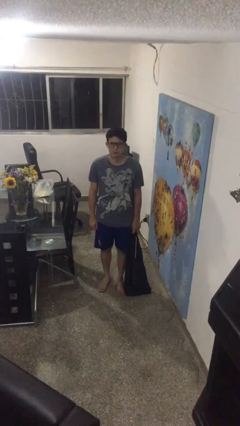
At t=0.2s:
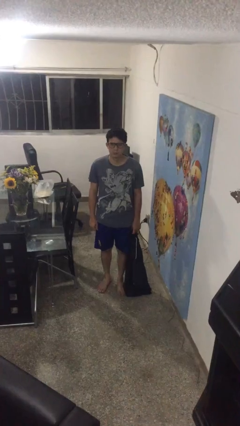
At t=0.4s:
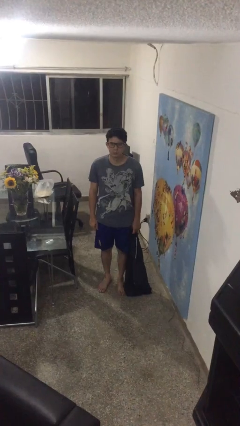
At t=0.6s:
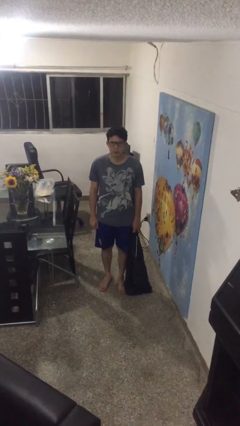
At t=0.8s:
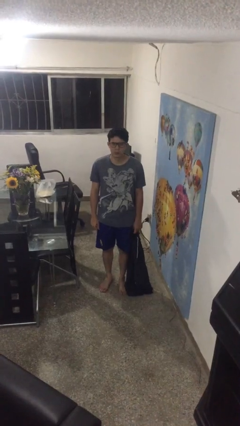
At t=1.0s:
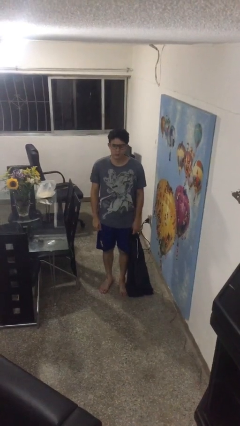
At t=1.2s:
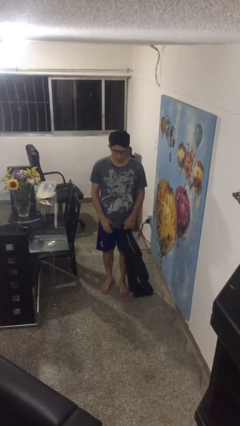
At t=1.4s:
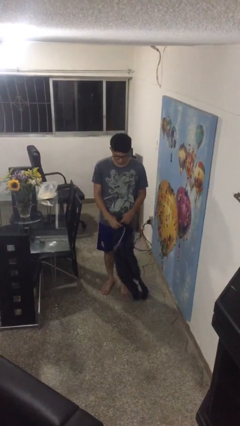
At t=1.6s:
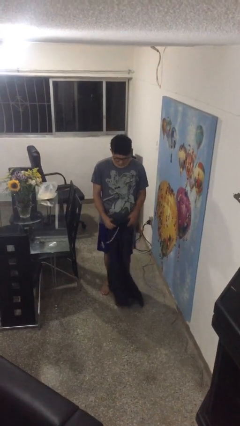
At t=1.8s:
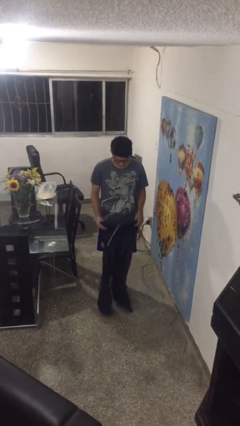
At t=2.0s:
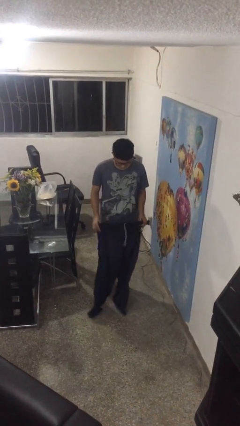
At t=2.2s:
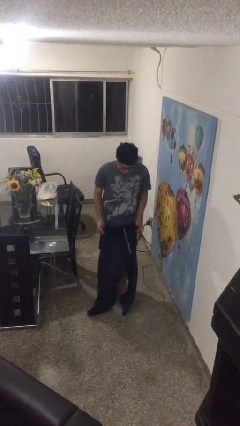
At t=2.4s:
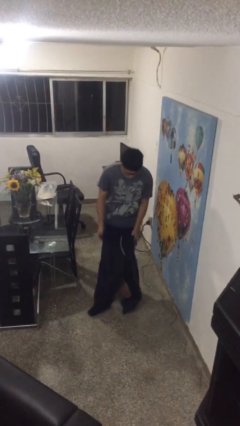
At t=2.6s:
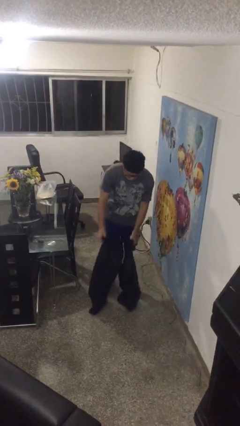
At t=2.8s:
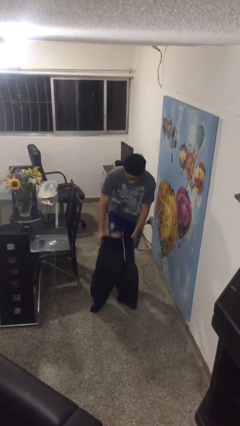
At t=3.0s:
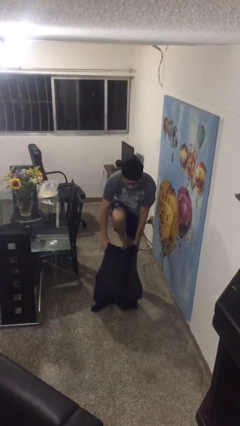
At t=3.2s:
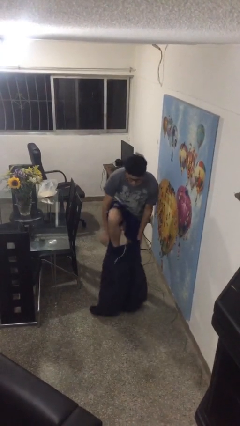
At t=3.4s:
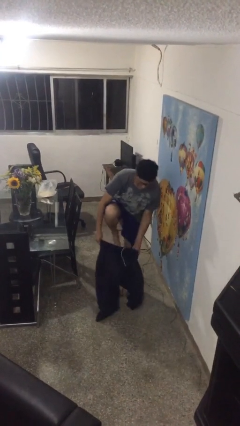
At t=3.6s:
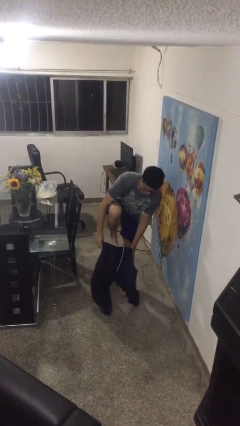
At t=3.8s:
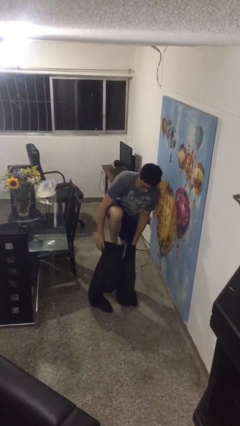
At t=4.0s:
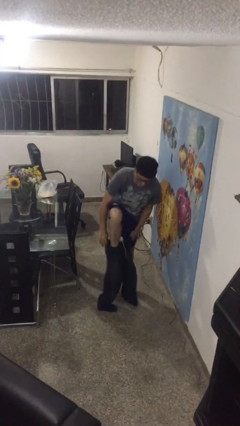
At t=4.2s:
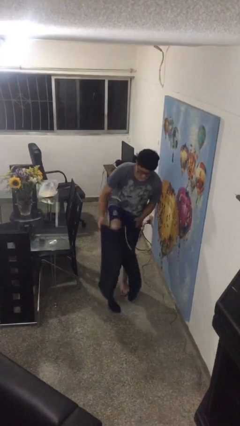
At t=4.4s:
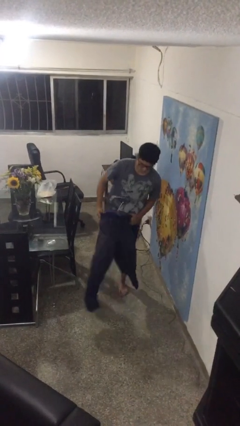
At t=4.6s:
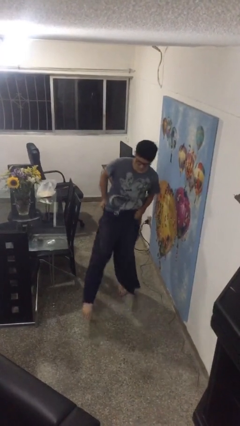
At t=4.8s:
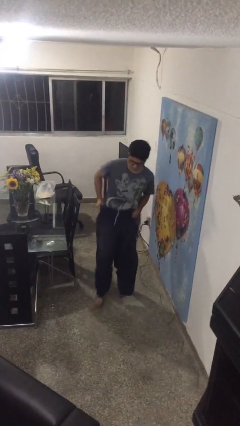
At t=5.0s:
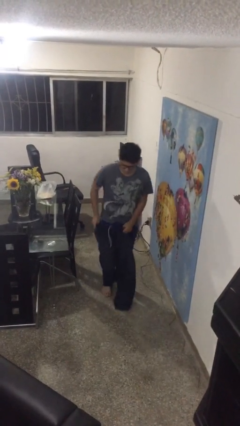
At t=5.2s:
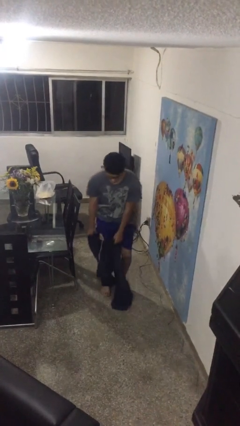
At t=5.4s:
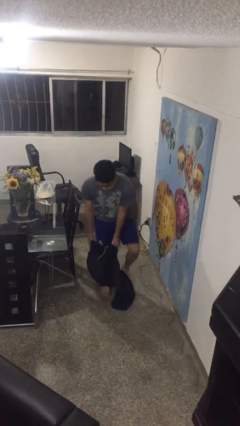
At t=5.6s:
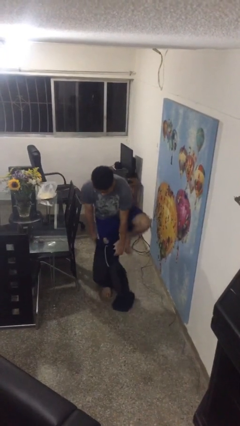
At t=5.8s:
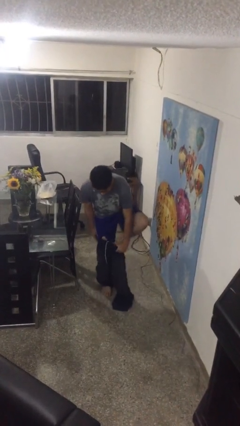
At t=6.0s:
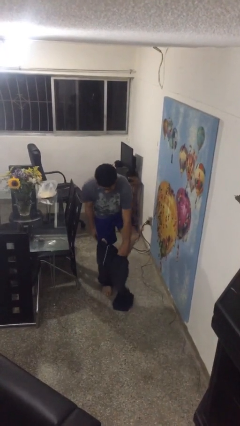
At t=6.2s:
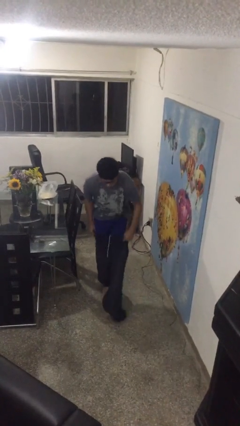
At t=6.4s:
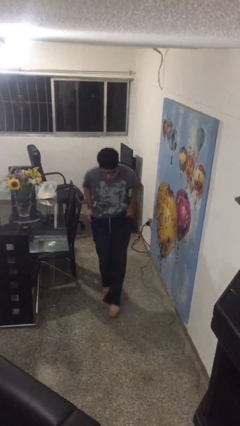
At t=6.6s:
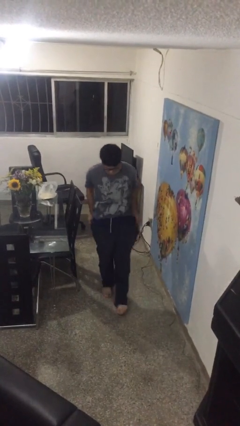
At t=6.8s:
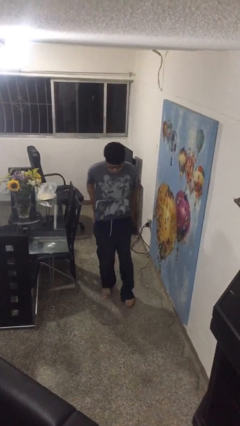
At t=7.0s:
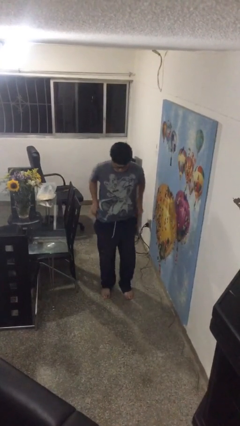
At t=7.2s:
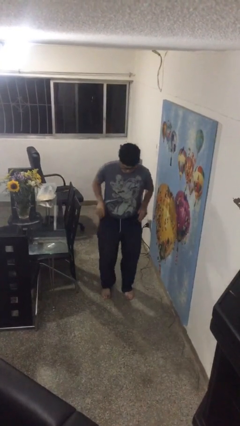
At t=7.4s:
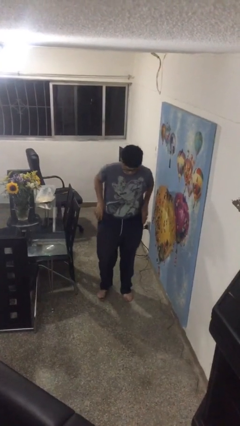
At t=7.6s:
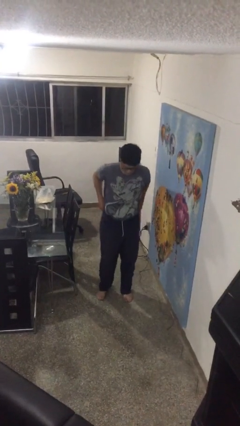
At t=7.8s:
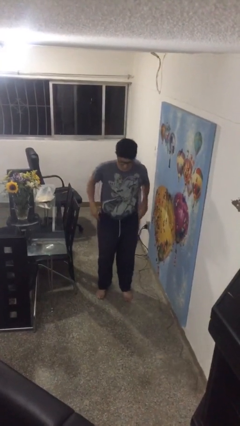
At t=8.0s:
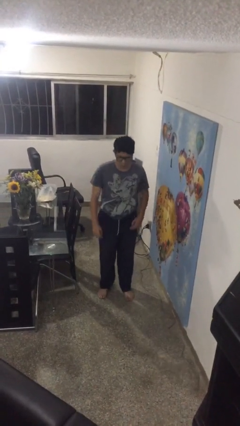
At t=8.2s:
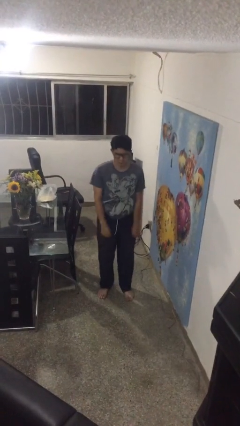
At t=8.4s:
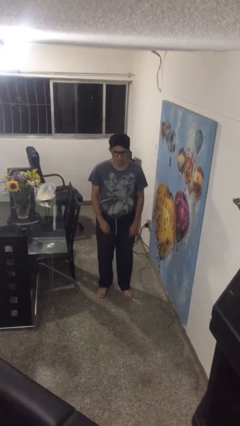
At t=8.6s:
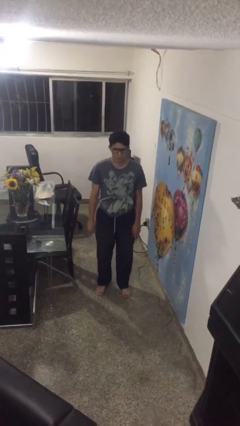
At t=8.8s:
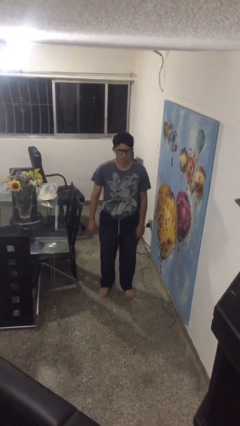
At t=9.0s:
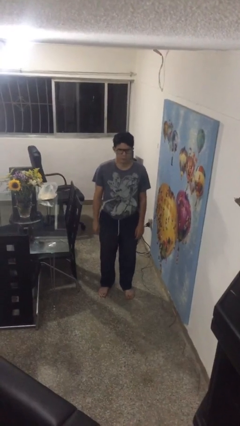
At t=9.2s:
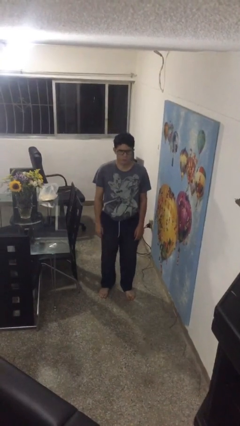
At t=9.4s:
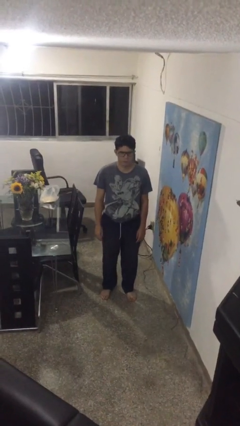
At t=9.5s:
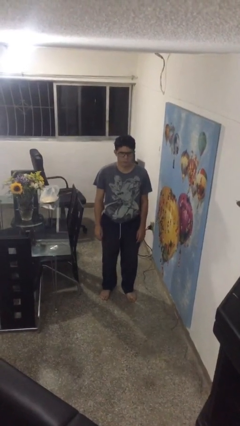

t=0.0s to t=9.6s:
person puts on pants

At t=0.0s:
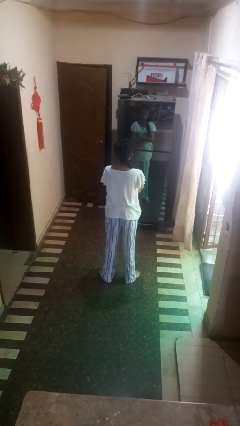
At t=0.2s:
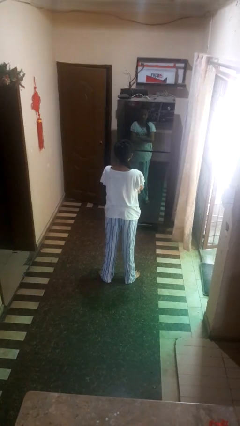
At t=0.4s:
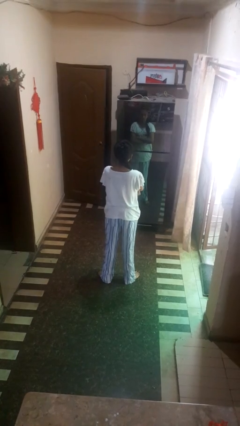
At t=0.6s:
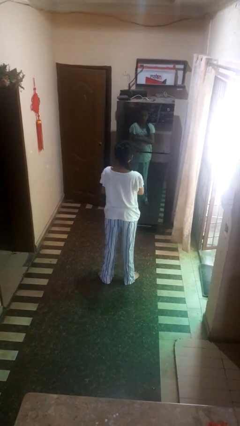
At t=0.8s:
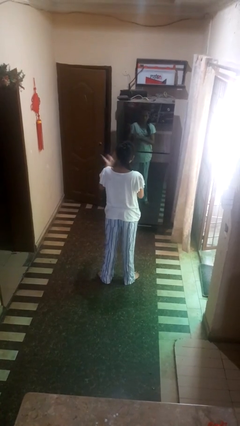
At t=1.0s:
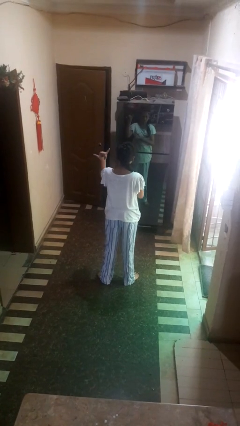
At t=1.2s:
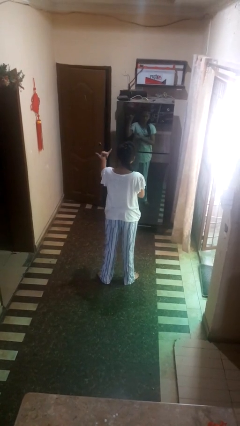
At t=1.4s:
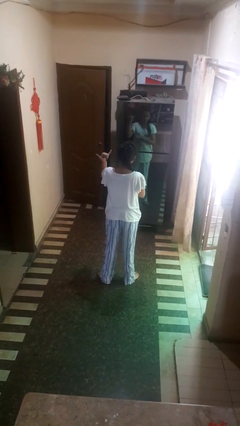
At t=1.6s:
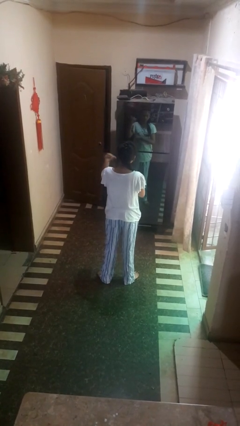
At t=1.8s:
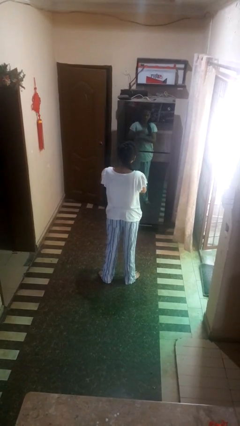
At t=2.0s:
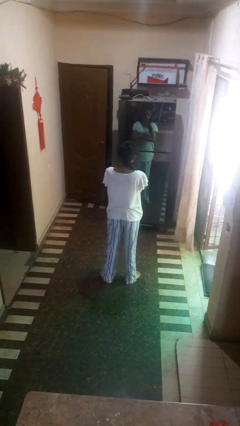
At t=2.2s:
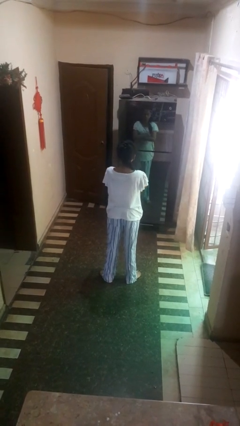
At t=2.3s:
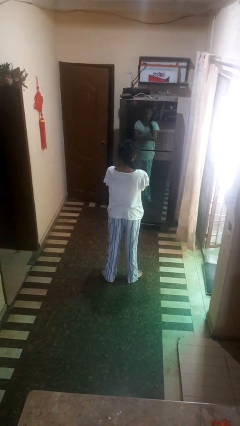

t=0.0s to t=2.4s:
person gestures hang loose

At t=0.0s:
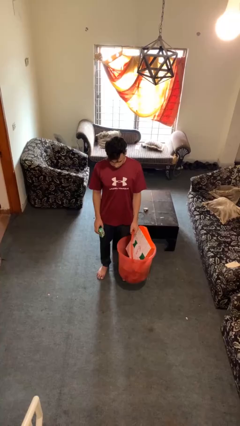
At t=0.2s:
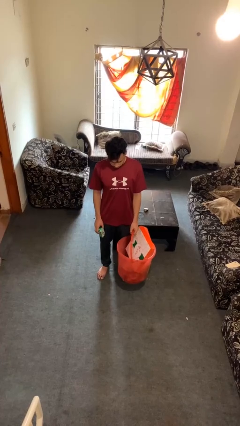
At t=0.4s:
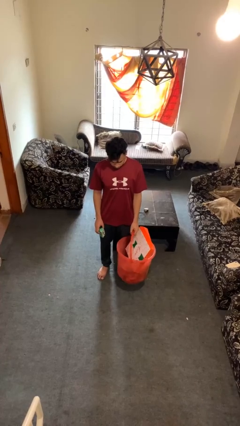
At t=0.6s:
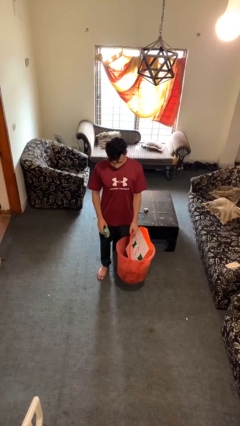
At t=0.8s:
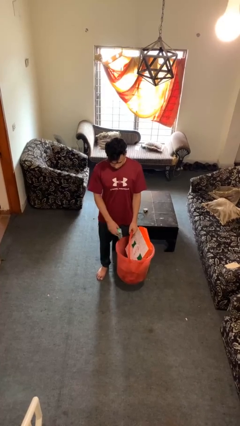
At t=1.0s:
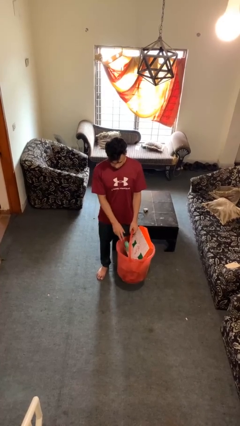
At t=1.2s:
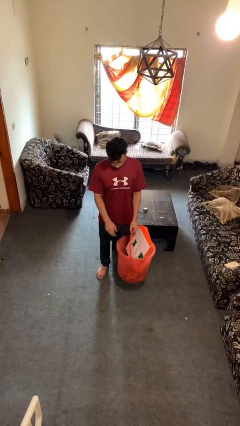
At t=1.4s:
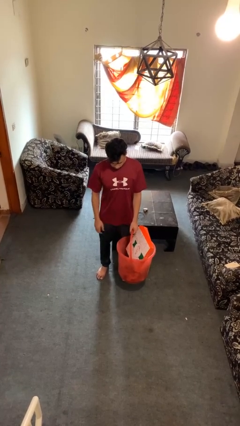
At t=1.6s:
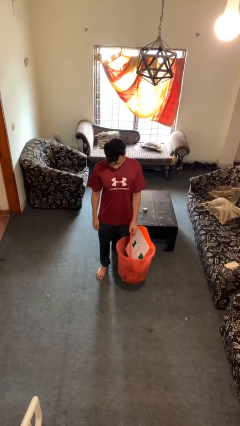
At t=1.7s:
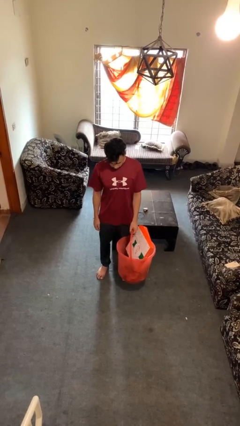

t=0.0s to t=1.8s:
person puts object into basket

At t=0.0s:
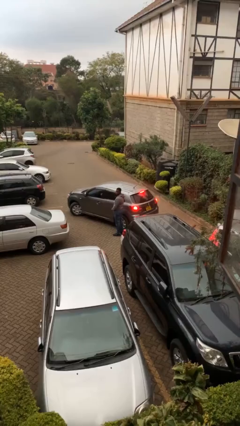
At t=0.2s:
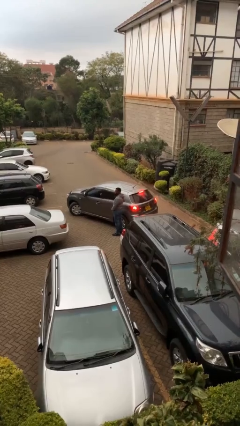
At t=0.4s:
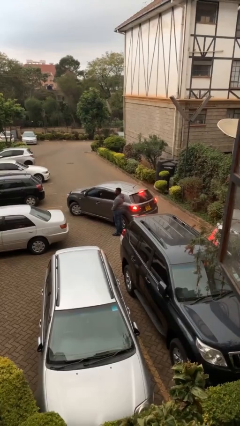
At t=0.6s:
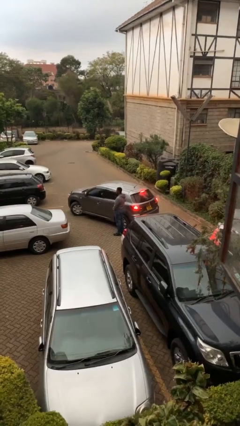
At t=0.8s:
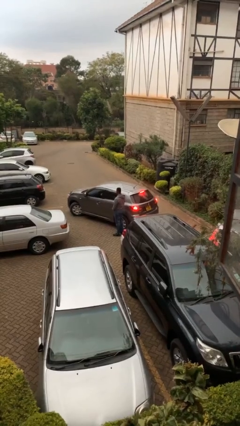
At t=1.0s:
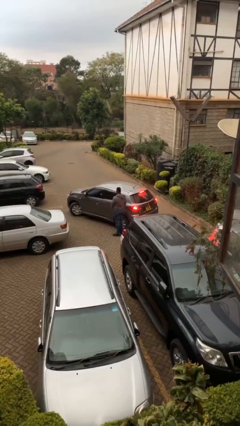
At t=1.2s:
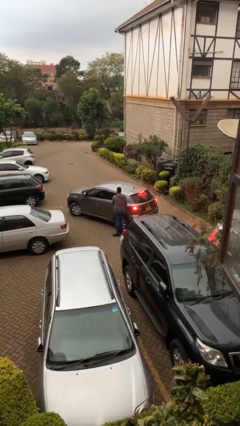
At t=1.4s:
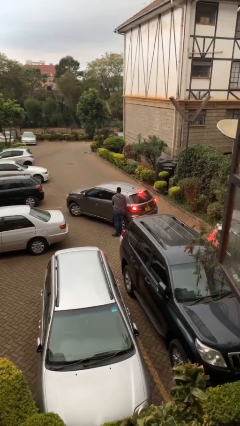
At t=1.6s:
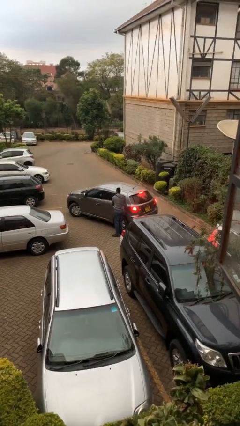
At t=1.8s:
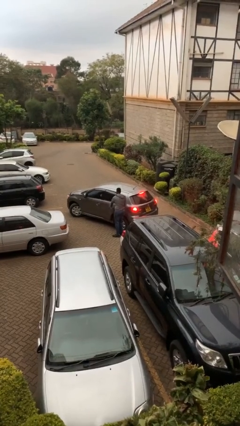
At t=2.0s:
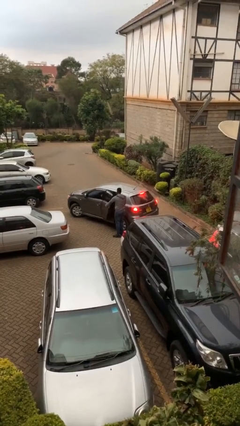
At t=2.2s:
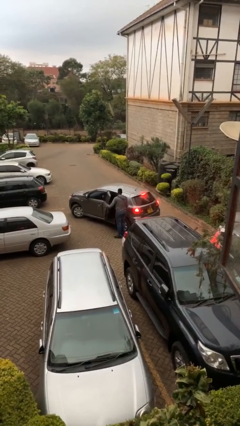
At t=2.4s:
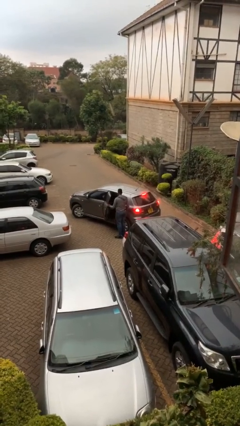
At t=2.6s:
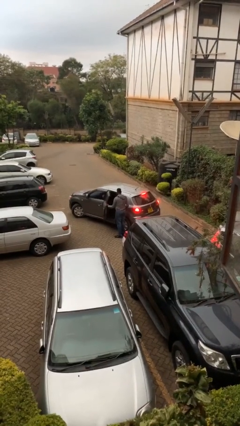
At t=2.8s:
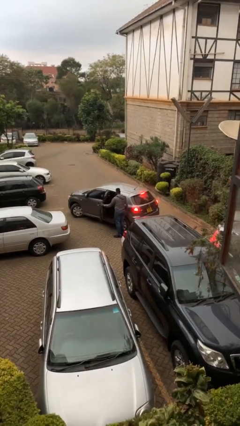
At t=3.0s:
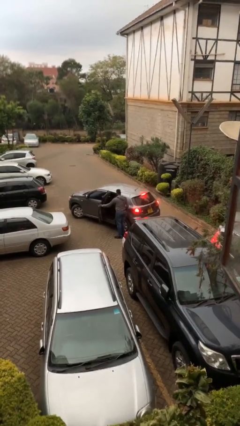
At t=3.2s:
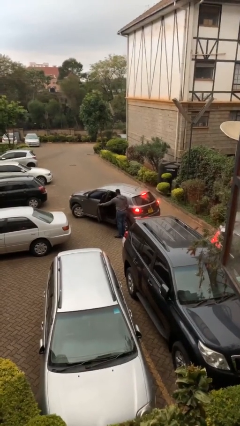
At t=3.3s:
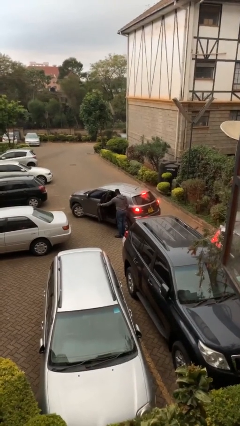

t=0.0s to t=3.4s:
person opens car door

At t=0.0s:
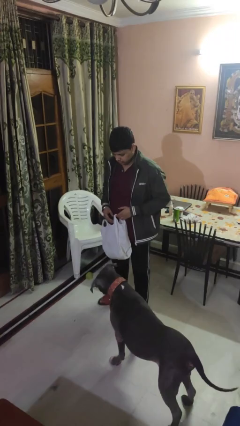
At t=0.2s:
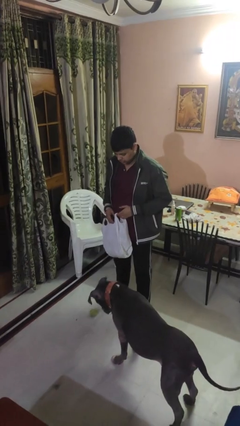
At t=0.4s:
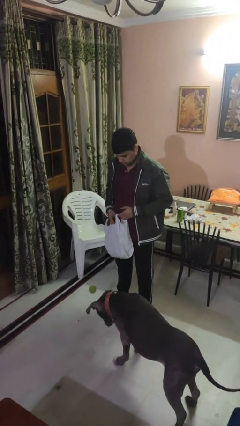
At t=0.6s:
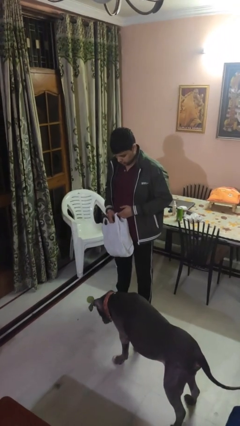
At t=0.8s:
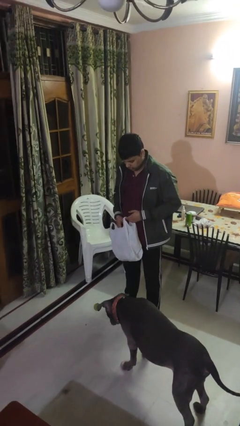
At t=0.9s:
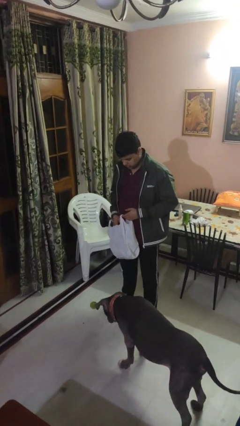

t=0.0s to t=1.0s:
person throws object to dog
